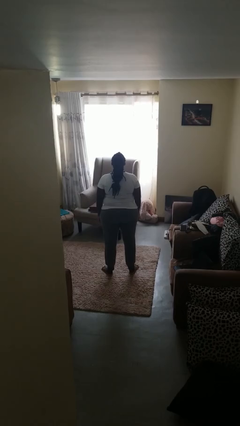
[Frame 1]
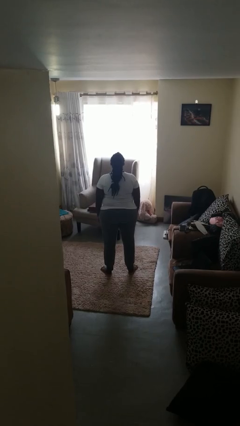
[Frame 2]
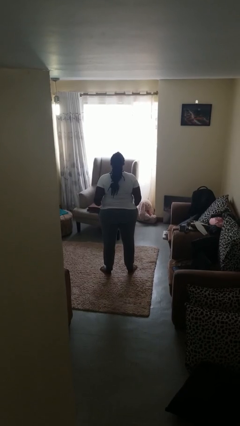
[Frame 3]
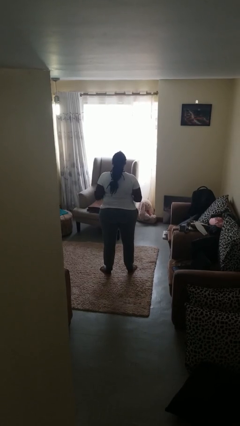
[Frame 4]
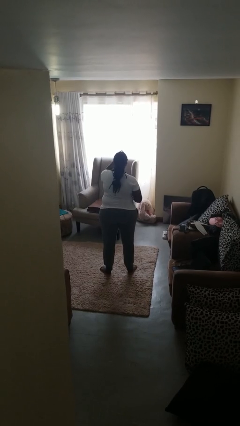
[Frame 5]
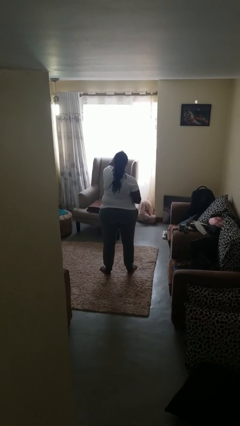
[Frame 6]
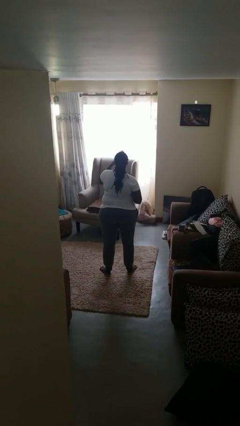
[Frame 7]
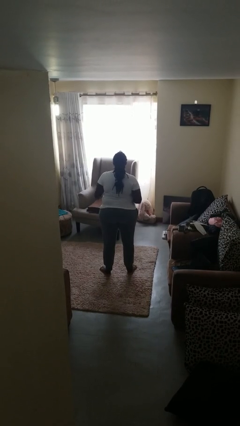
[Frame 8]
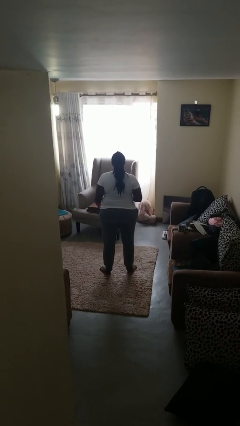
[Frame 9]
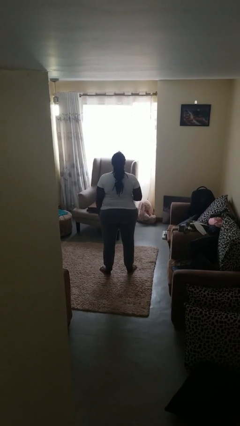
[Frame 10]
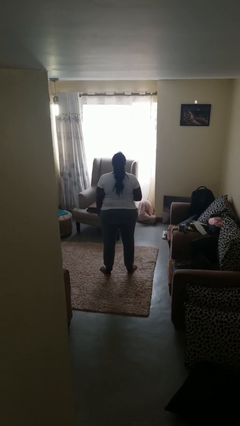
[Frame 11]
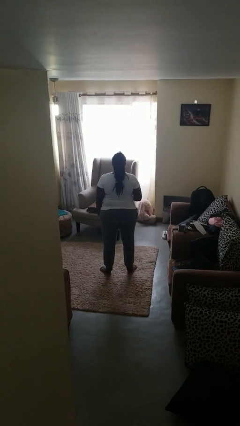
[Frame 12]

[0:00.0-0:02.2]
person punches

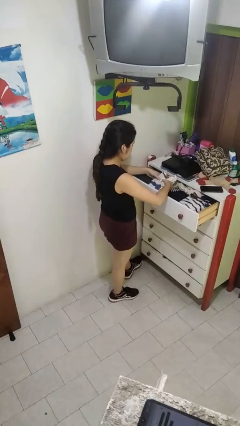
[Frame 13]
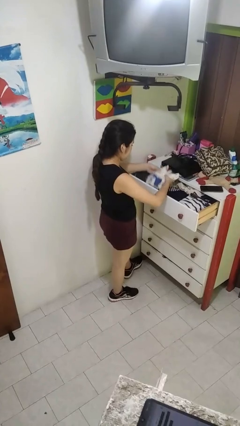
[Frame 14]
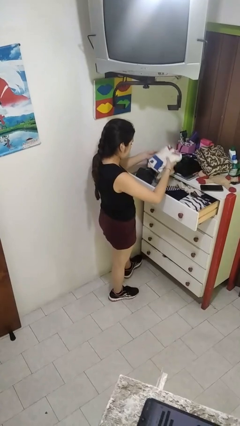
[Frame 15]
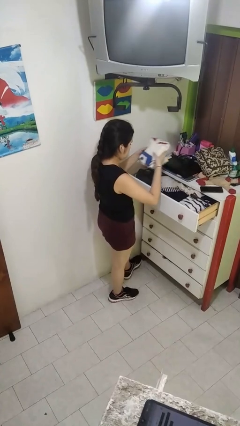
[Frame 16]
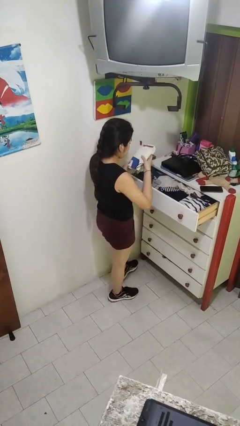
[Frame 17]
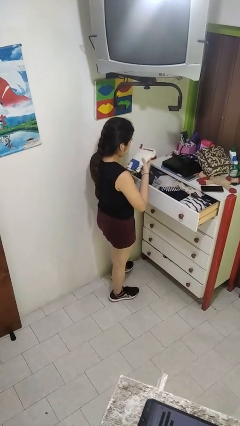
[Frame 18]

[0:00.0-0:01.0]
person takes clothes from dresser

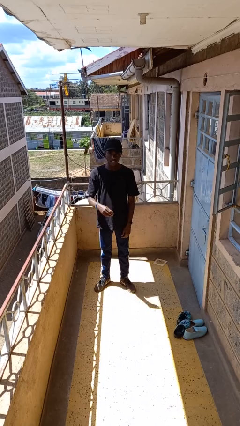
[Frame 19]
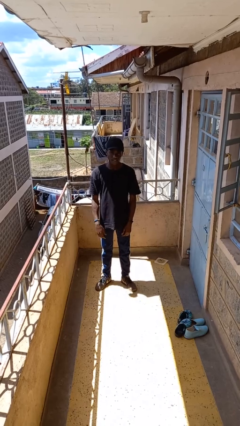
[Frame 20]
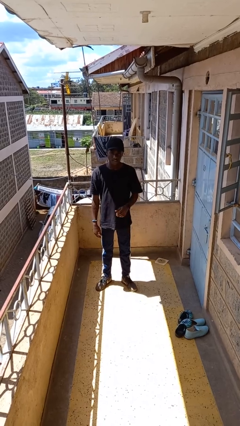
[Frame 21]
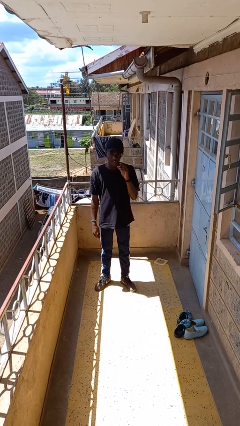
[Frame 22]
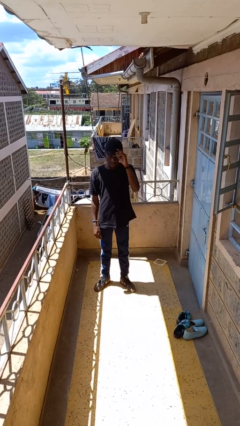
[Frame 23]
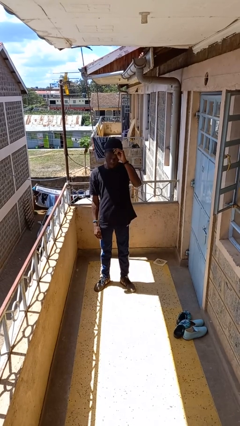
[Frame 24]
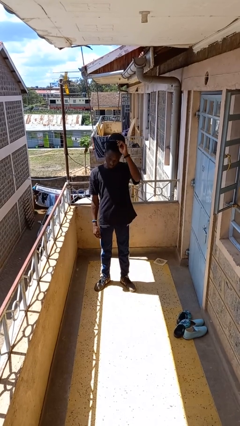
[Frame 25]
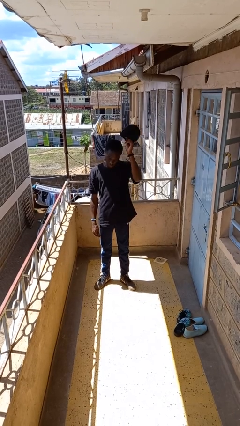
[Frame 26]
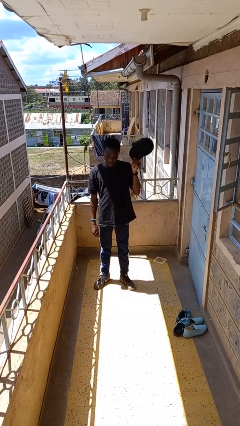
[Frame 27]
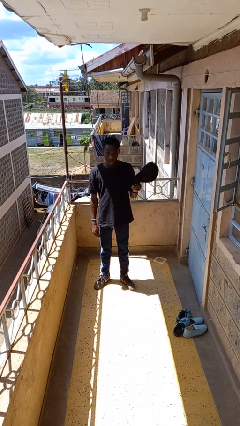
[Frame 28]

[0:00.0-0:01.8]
person takes off hat

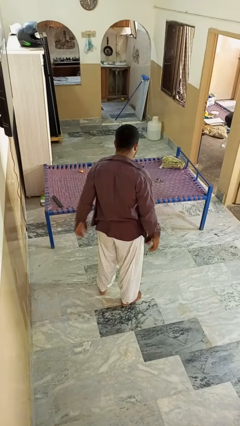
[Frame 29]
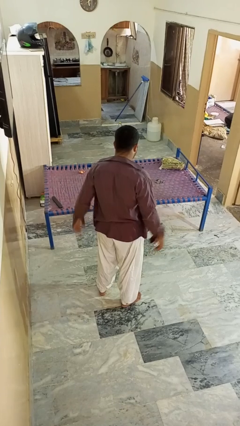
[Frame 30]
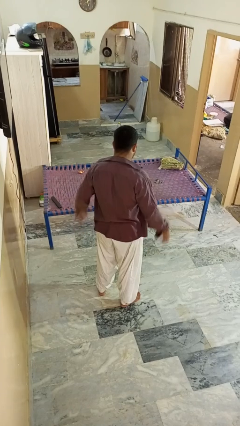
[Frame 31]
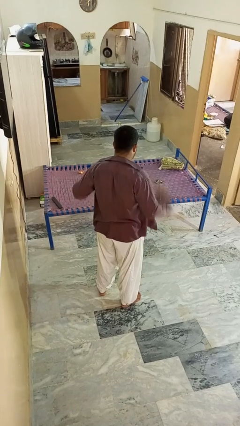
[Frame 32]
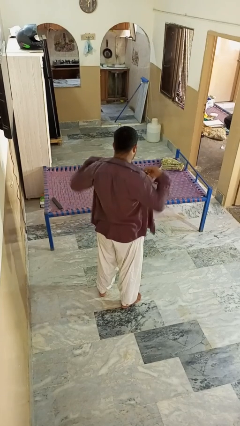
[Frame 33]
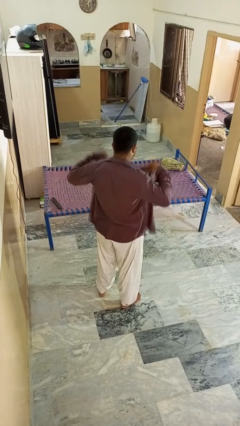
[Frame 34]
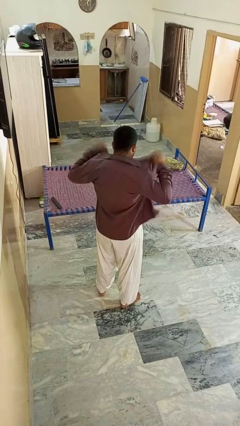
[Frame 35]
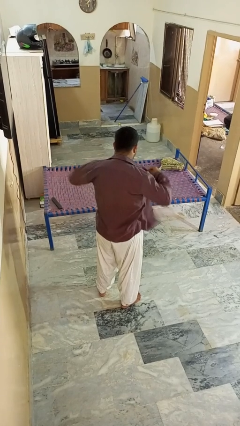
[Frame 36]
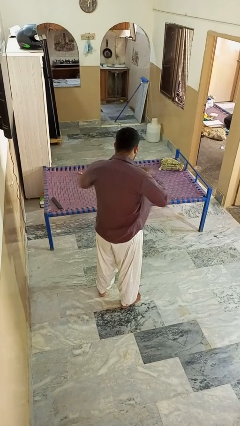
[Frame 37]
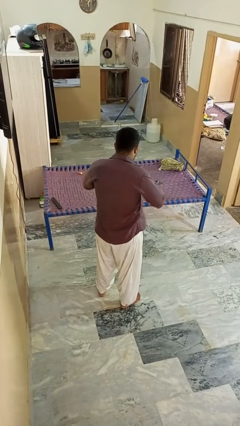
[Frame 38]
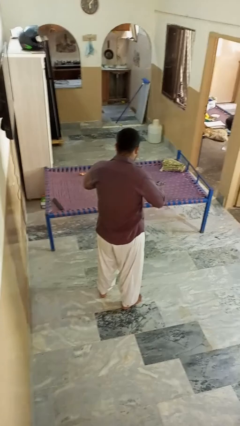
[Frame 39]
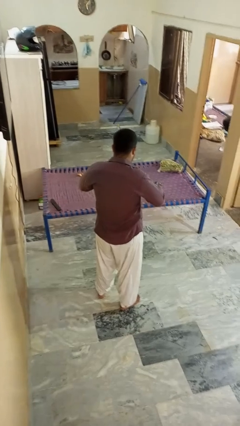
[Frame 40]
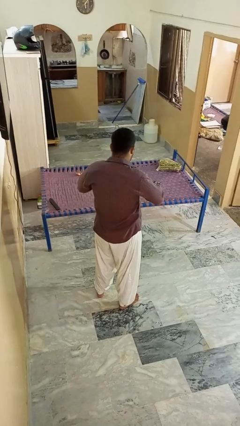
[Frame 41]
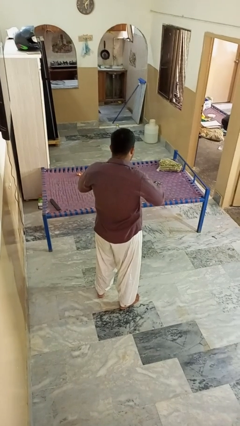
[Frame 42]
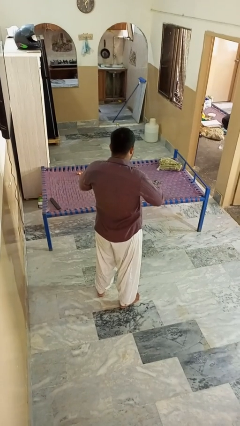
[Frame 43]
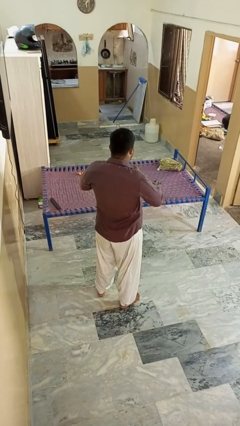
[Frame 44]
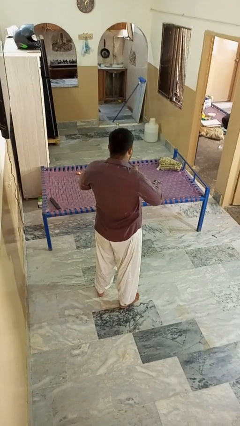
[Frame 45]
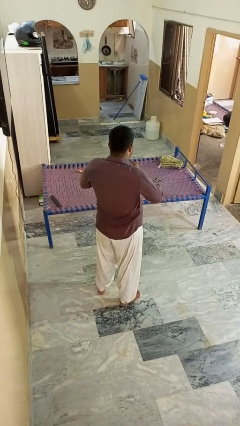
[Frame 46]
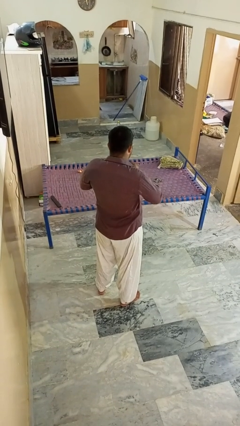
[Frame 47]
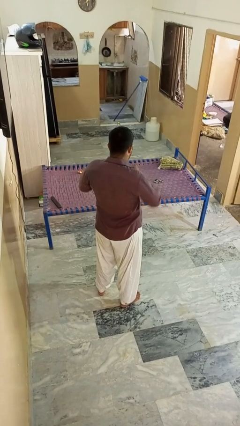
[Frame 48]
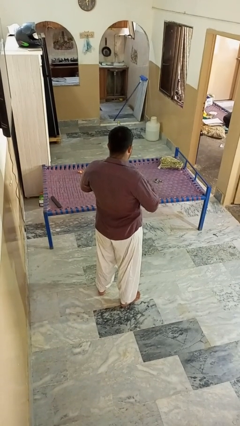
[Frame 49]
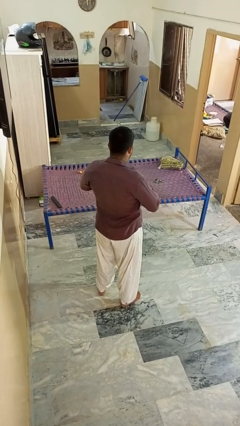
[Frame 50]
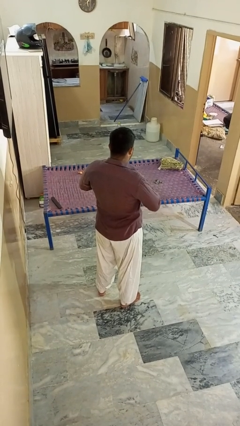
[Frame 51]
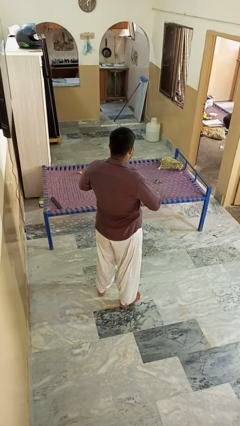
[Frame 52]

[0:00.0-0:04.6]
person buttons shirt

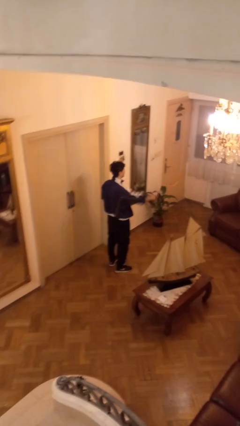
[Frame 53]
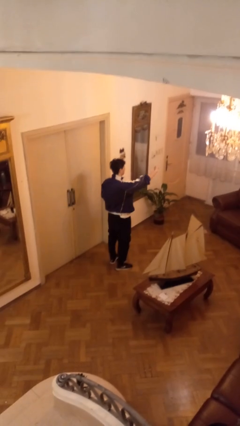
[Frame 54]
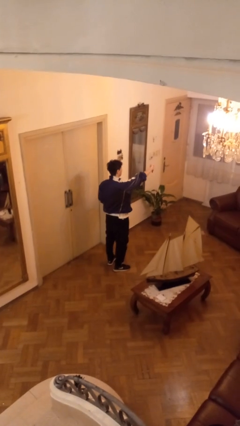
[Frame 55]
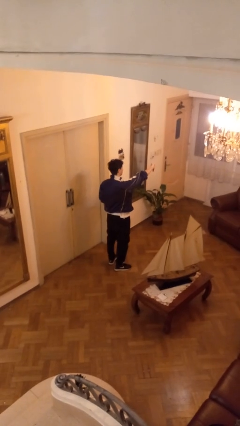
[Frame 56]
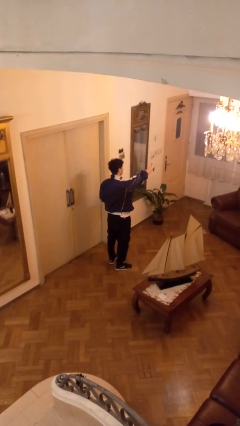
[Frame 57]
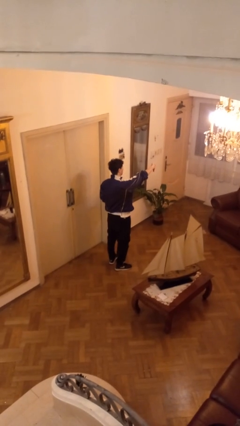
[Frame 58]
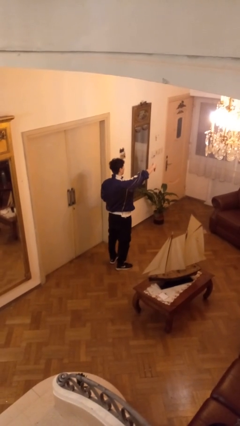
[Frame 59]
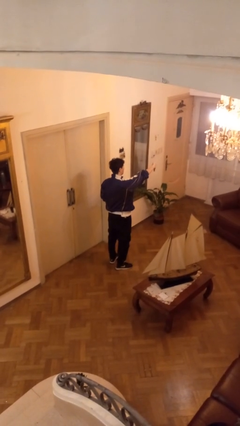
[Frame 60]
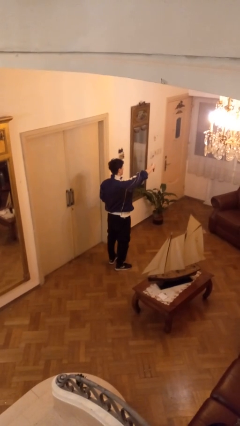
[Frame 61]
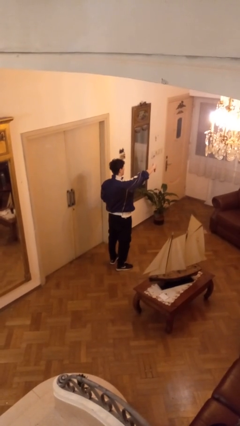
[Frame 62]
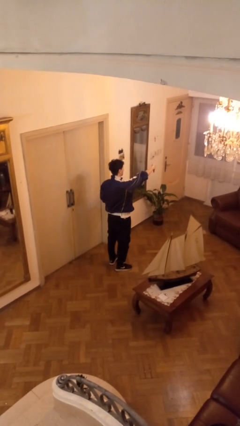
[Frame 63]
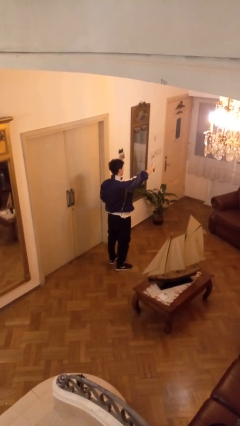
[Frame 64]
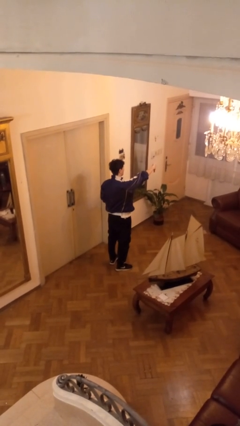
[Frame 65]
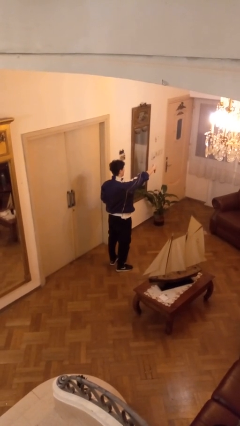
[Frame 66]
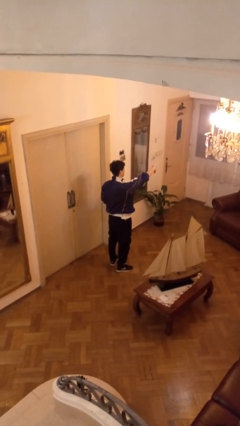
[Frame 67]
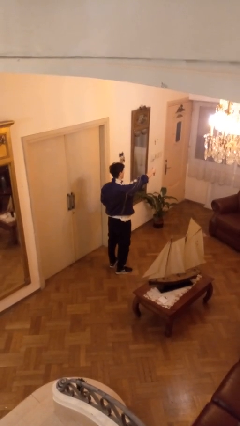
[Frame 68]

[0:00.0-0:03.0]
person gestures thumbs down

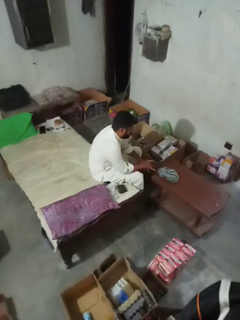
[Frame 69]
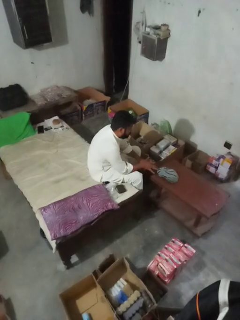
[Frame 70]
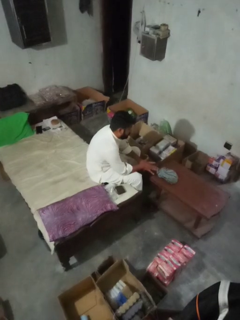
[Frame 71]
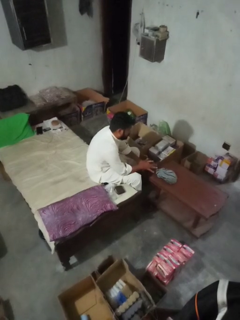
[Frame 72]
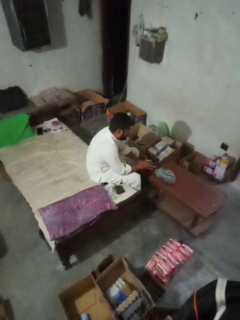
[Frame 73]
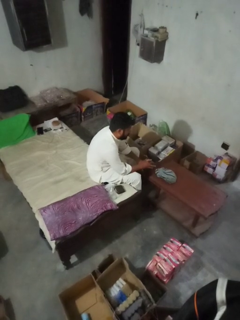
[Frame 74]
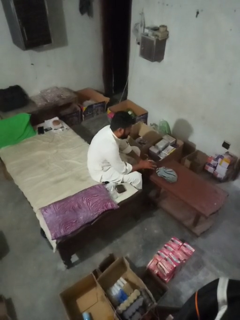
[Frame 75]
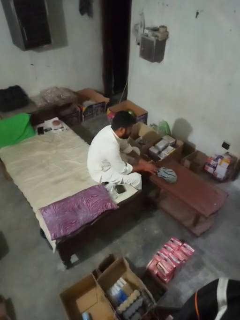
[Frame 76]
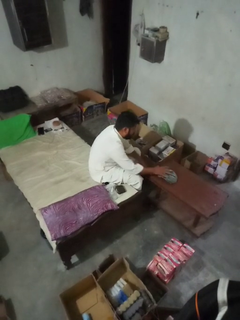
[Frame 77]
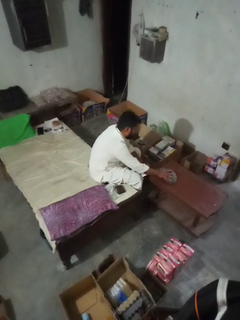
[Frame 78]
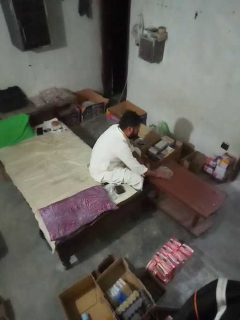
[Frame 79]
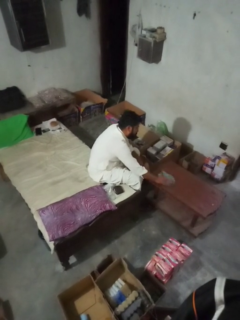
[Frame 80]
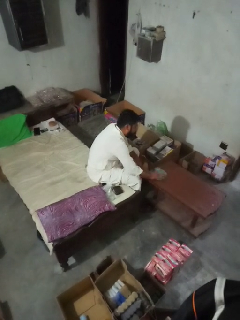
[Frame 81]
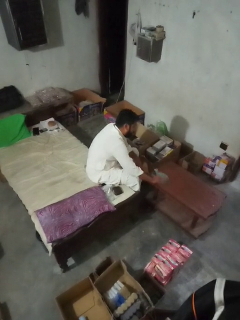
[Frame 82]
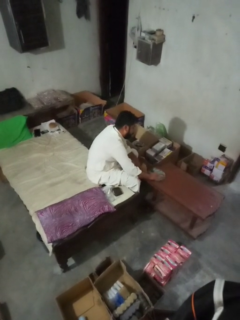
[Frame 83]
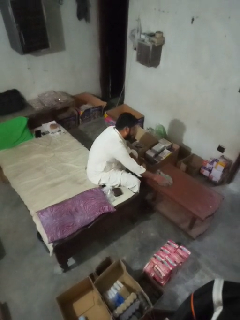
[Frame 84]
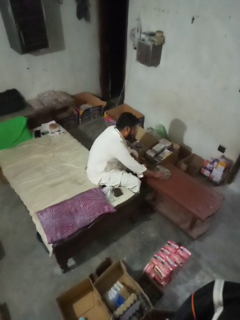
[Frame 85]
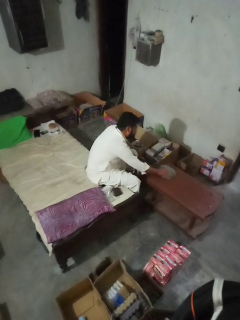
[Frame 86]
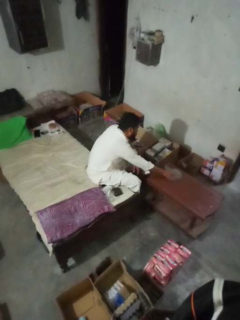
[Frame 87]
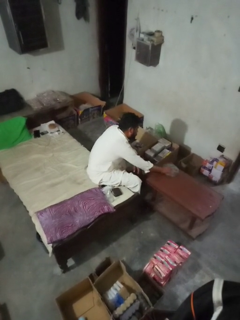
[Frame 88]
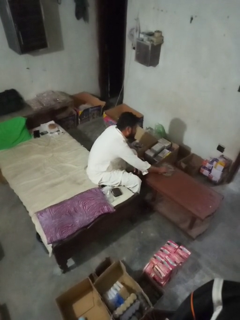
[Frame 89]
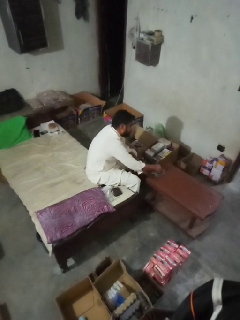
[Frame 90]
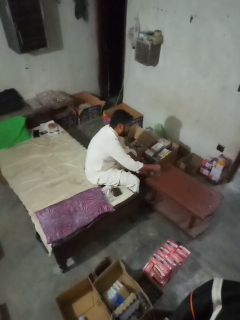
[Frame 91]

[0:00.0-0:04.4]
person cleans table with rag

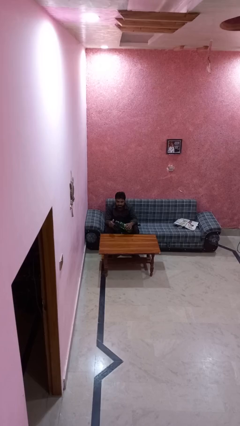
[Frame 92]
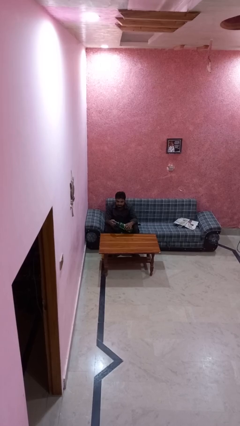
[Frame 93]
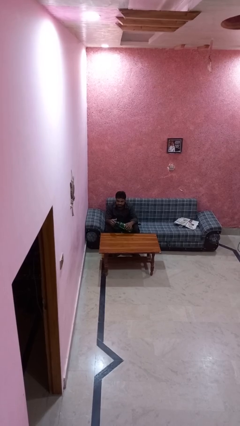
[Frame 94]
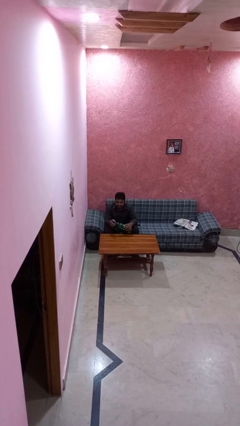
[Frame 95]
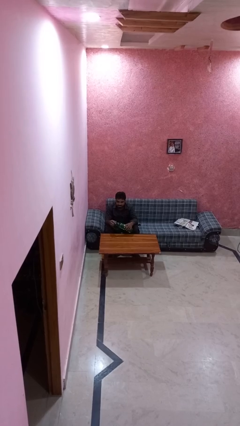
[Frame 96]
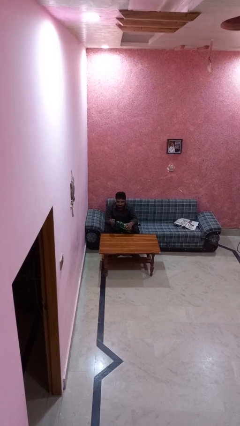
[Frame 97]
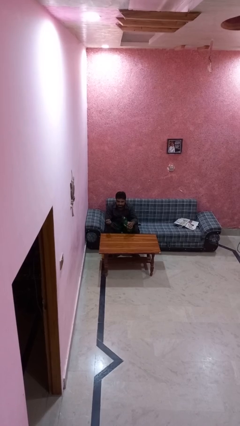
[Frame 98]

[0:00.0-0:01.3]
person unscrews lid from bottle
